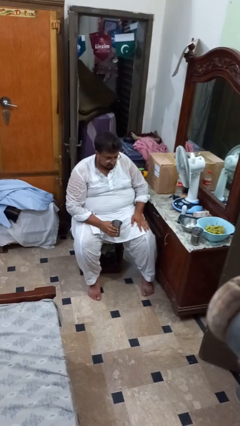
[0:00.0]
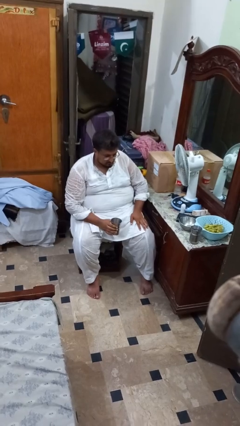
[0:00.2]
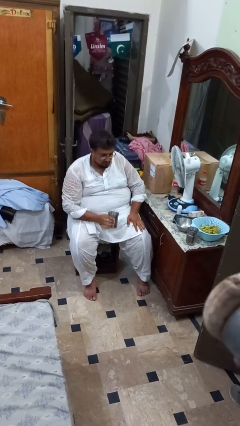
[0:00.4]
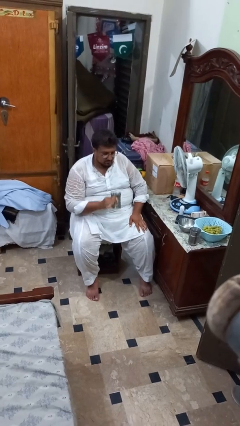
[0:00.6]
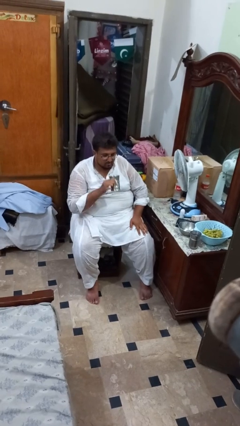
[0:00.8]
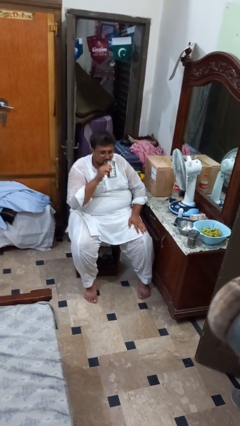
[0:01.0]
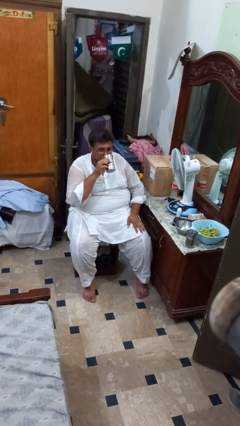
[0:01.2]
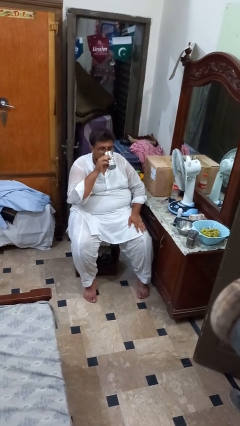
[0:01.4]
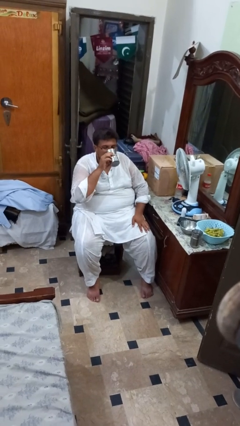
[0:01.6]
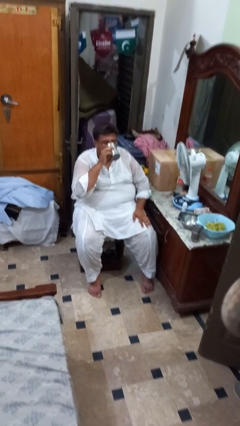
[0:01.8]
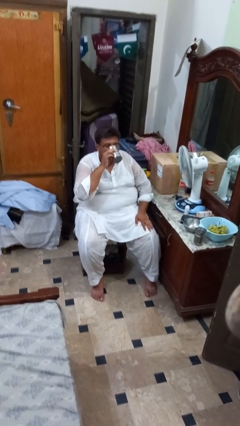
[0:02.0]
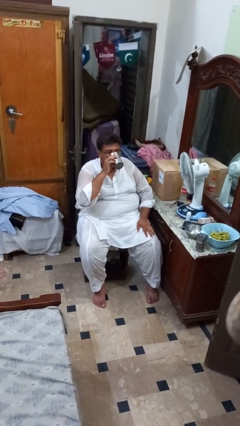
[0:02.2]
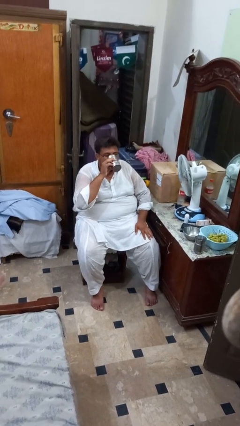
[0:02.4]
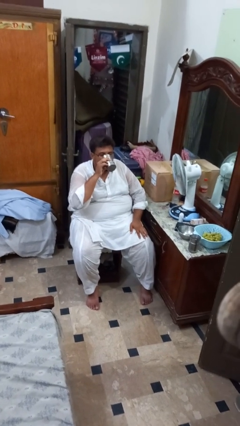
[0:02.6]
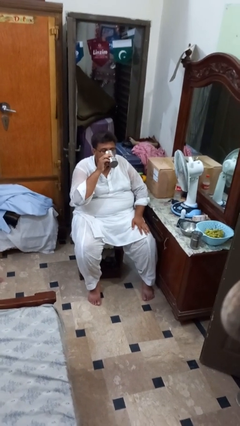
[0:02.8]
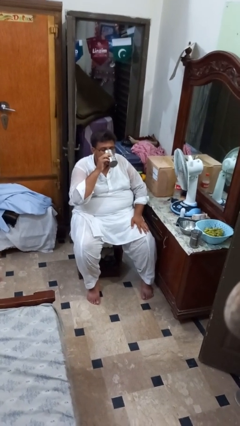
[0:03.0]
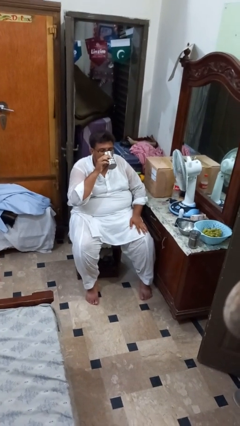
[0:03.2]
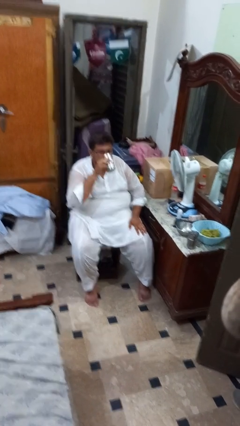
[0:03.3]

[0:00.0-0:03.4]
person drinks from mug

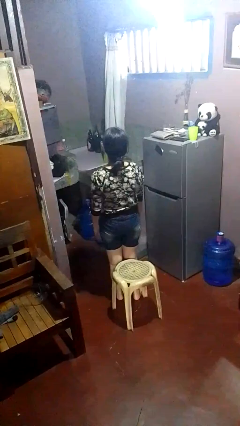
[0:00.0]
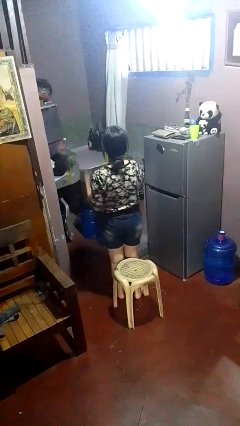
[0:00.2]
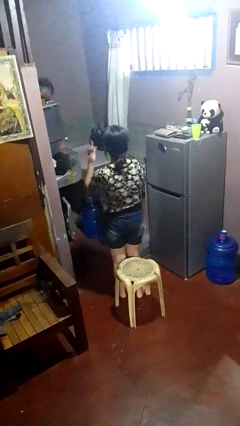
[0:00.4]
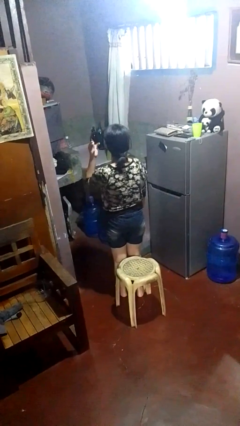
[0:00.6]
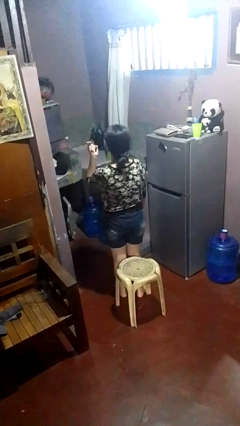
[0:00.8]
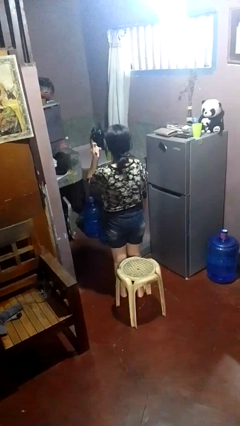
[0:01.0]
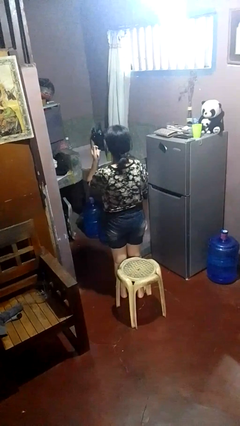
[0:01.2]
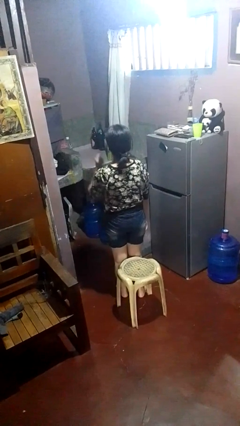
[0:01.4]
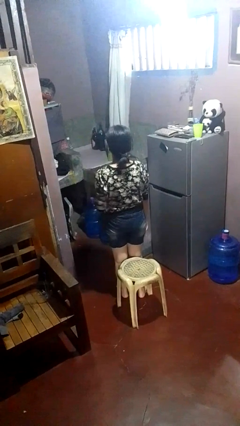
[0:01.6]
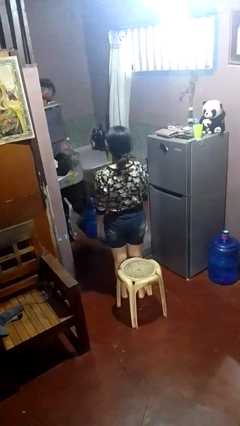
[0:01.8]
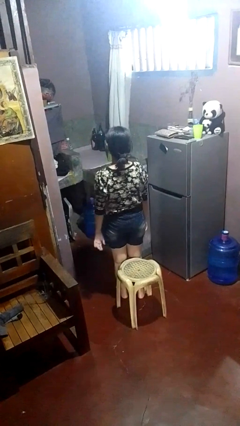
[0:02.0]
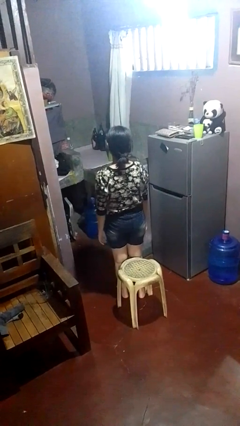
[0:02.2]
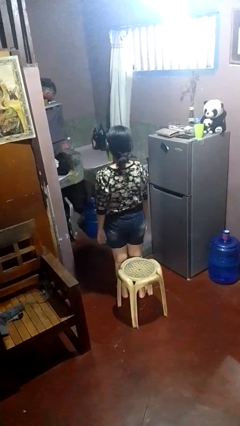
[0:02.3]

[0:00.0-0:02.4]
person snaps fingers

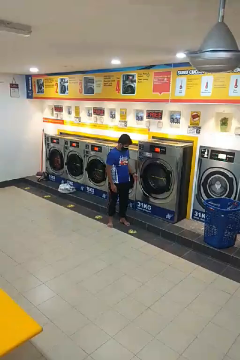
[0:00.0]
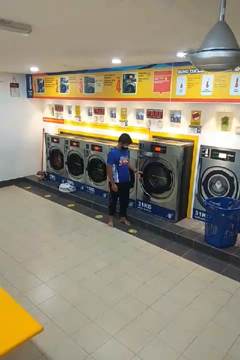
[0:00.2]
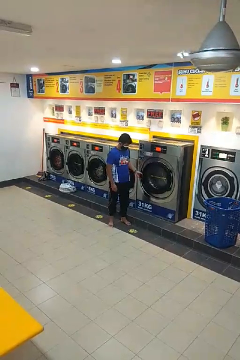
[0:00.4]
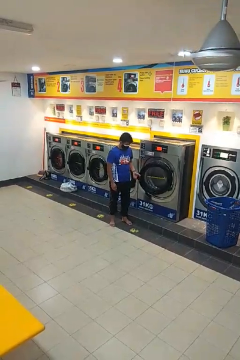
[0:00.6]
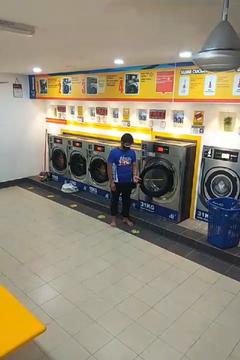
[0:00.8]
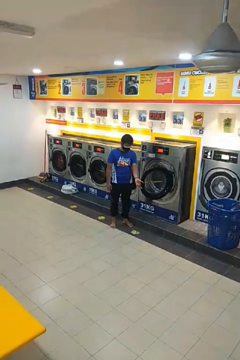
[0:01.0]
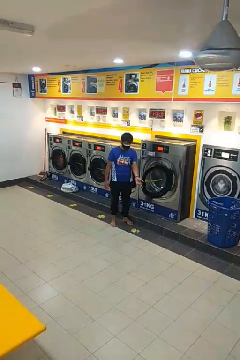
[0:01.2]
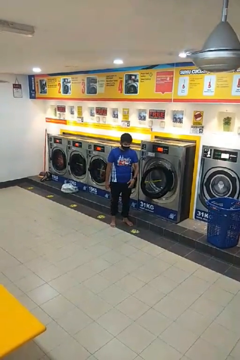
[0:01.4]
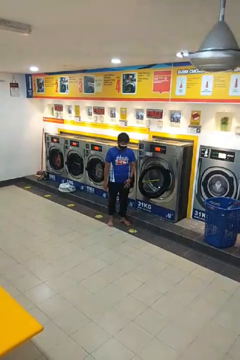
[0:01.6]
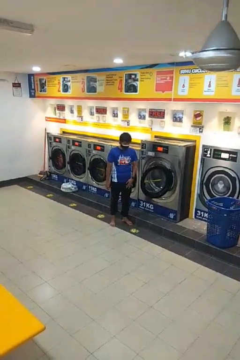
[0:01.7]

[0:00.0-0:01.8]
person opens clothes washer

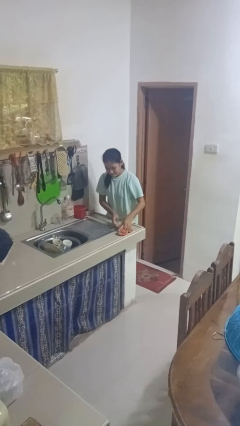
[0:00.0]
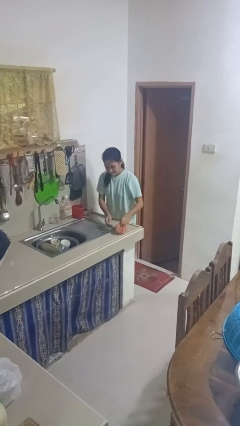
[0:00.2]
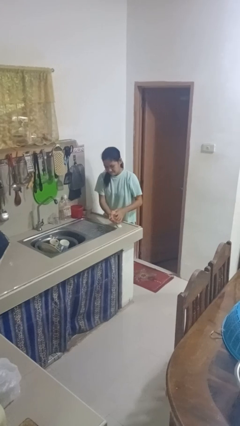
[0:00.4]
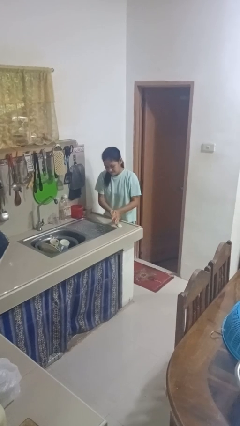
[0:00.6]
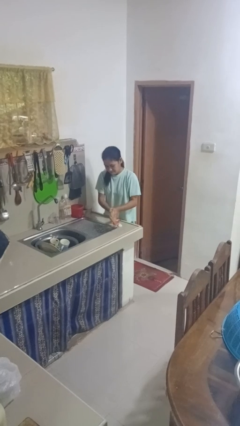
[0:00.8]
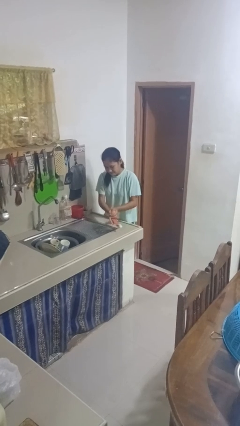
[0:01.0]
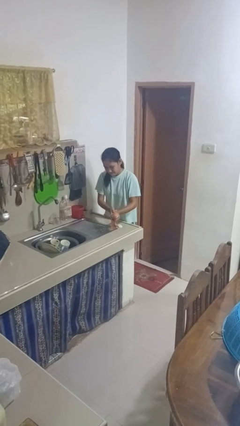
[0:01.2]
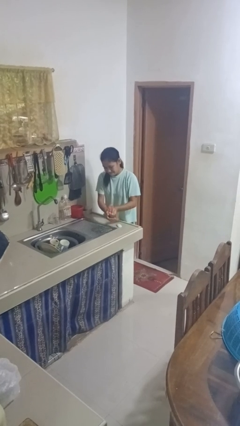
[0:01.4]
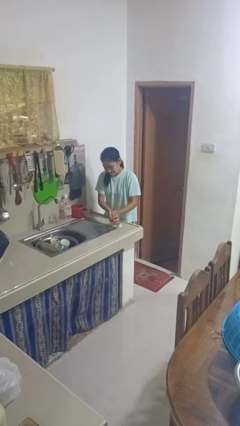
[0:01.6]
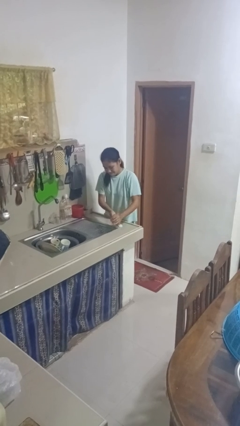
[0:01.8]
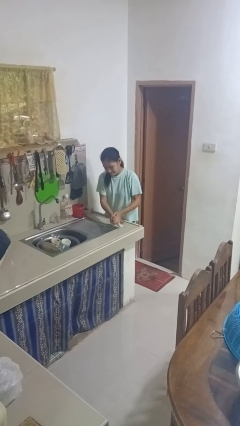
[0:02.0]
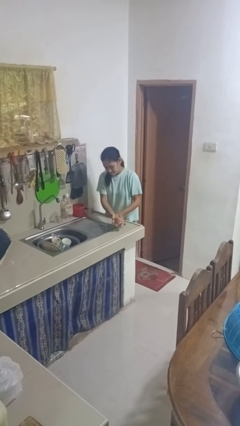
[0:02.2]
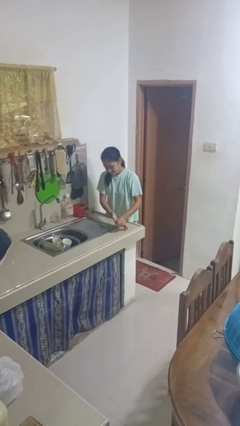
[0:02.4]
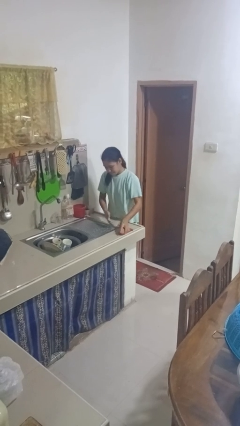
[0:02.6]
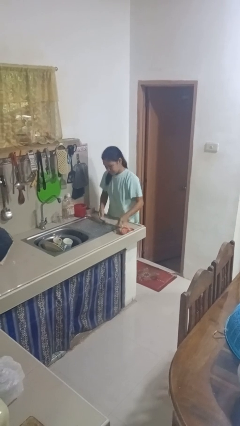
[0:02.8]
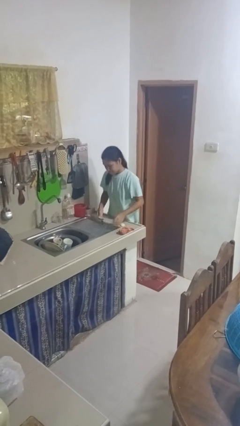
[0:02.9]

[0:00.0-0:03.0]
person dries hands with towel

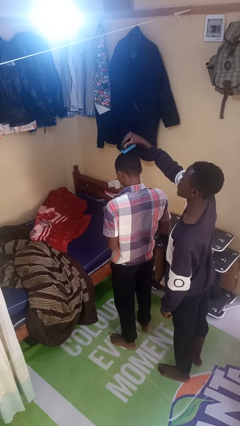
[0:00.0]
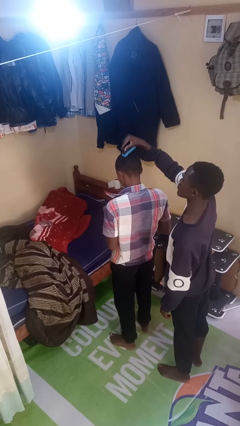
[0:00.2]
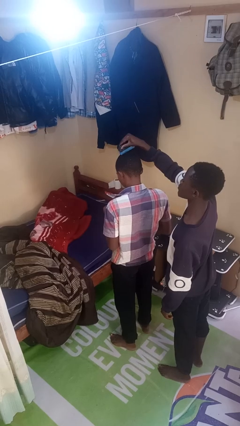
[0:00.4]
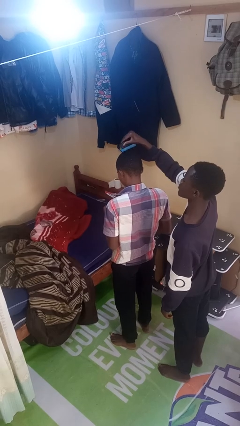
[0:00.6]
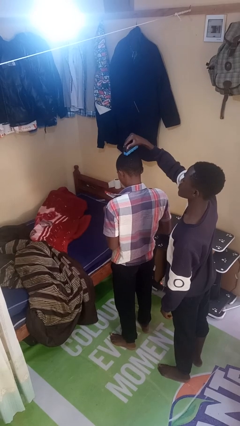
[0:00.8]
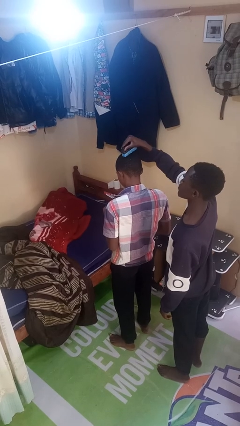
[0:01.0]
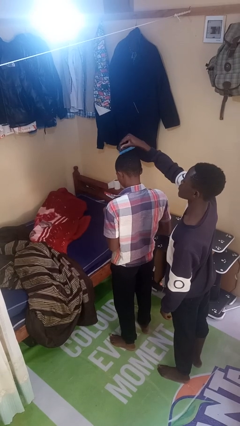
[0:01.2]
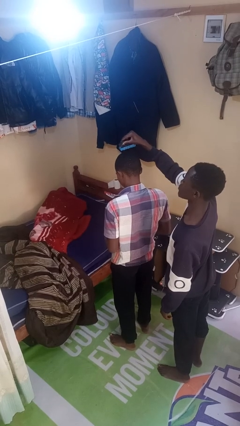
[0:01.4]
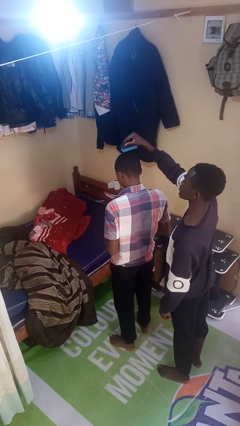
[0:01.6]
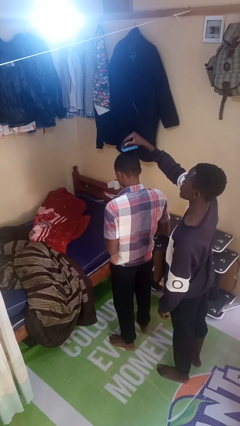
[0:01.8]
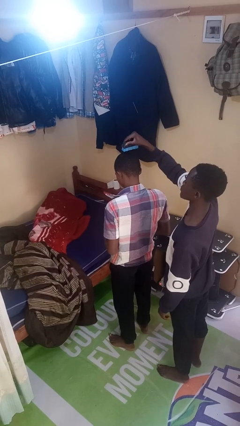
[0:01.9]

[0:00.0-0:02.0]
person brushes hair of person

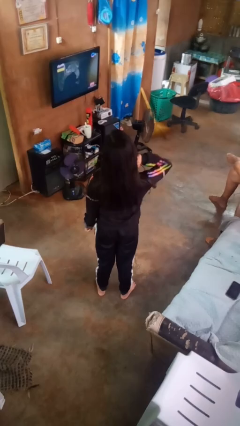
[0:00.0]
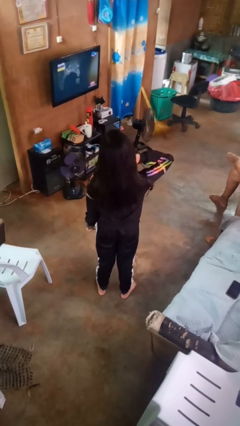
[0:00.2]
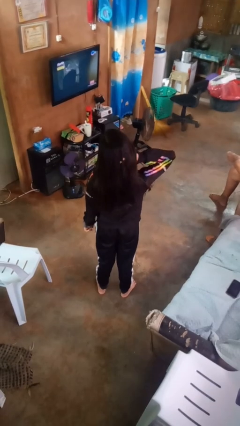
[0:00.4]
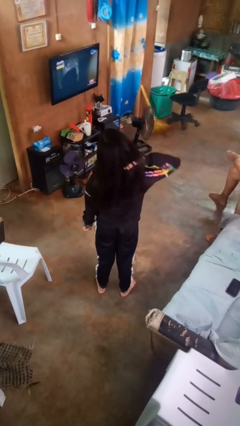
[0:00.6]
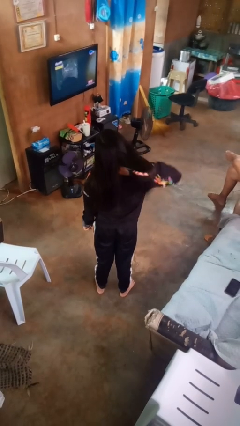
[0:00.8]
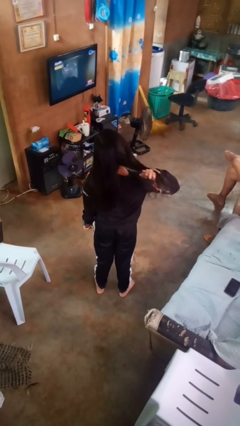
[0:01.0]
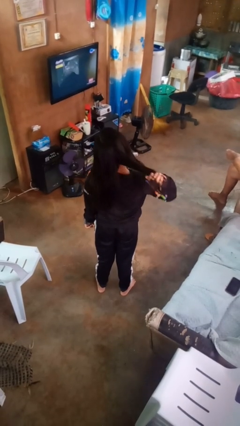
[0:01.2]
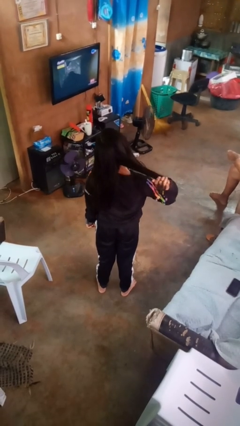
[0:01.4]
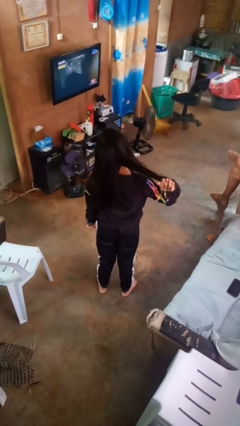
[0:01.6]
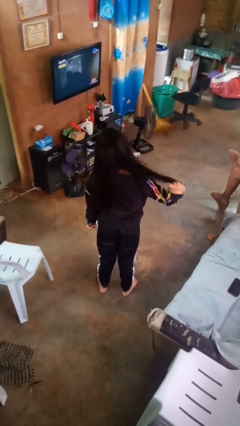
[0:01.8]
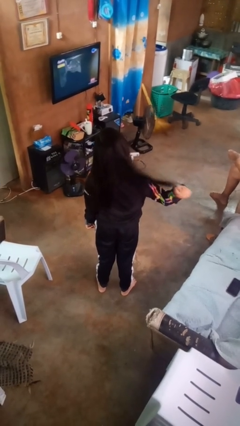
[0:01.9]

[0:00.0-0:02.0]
person strokes hair

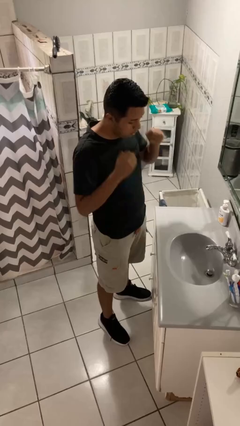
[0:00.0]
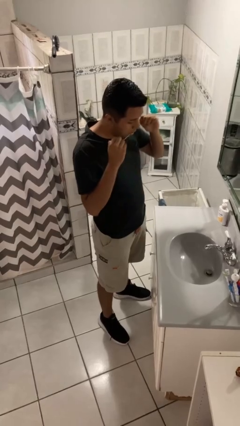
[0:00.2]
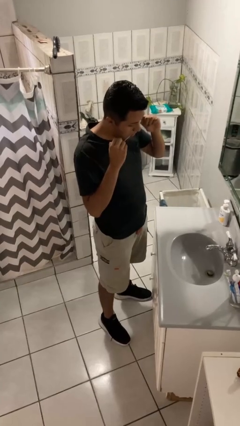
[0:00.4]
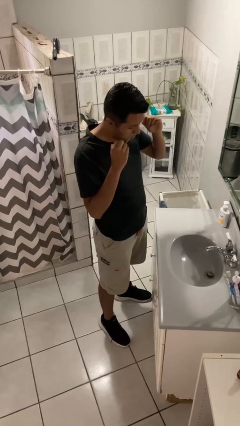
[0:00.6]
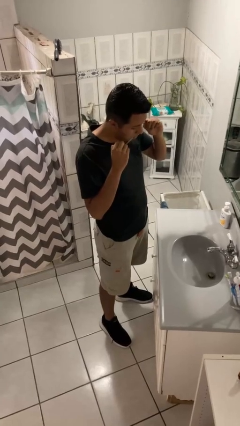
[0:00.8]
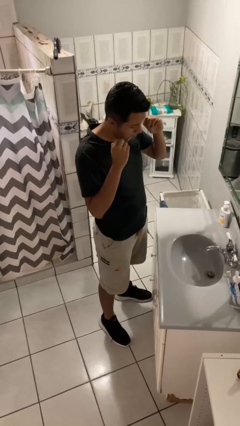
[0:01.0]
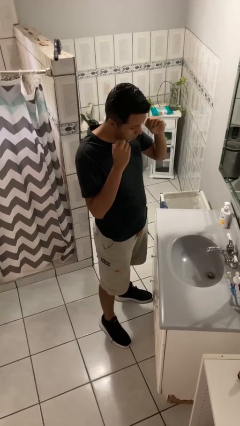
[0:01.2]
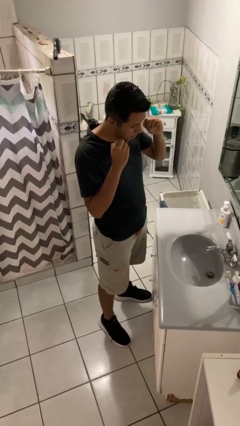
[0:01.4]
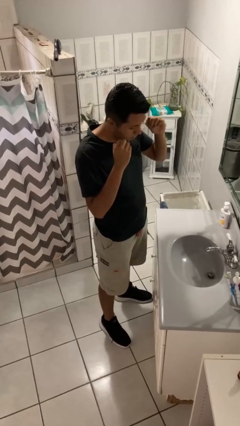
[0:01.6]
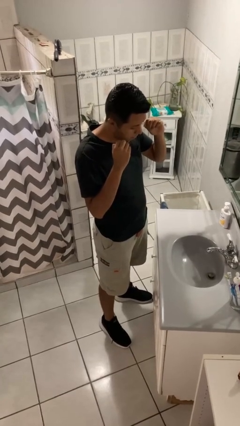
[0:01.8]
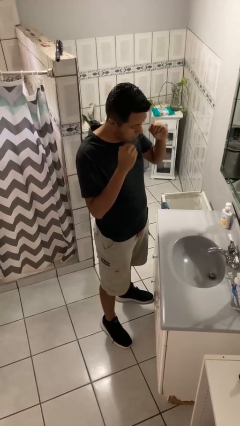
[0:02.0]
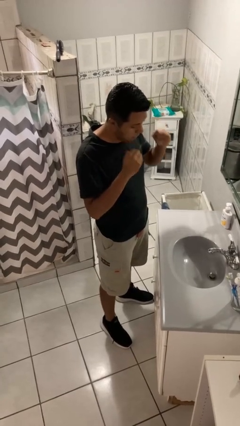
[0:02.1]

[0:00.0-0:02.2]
person flosses

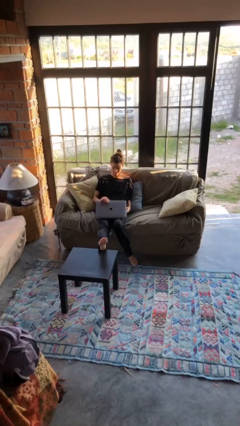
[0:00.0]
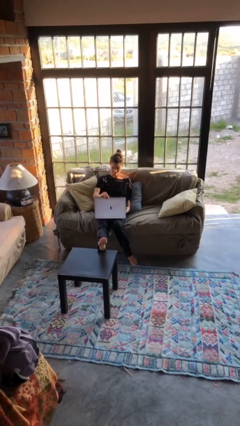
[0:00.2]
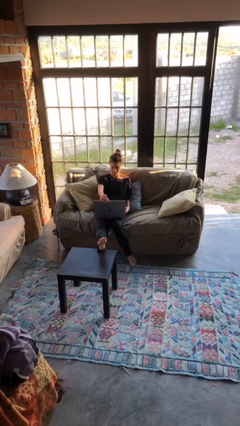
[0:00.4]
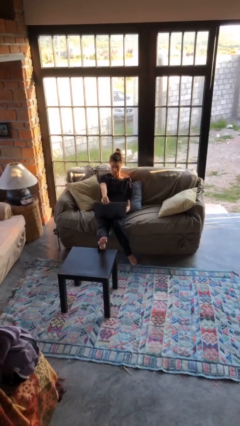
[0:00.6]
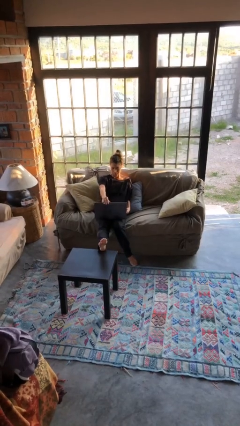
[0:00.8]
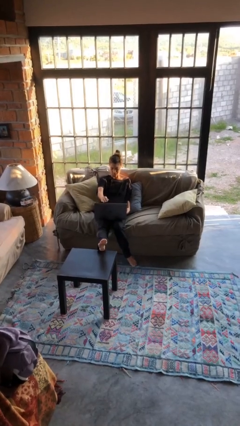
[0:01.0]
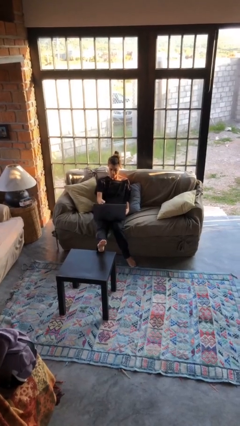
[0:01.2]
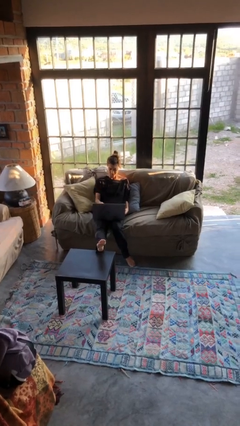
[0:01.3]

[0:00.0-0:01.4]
person opens laptop
